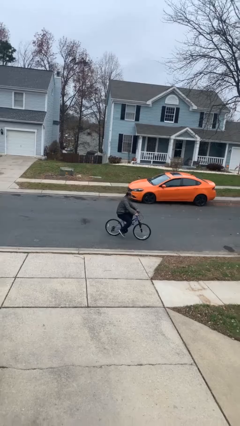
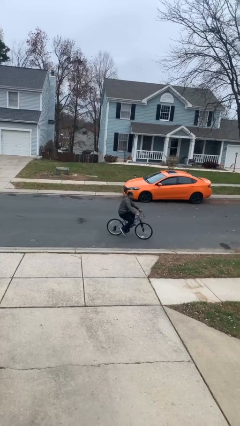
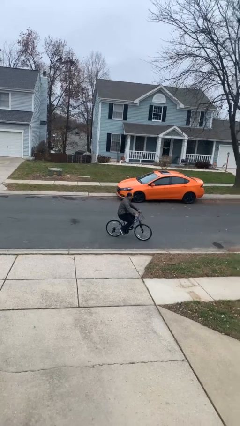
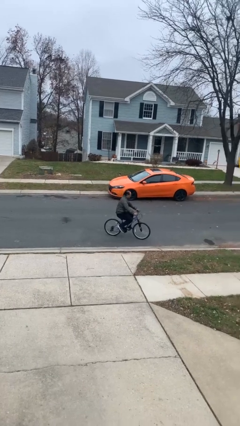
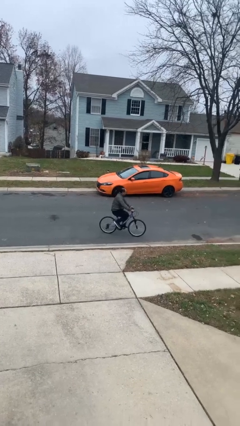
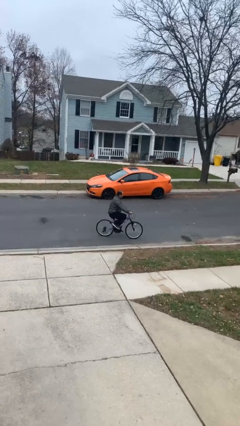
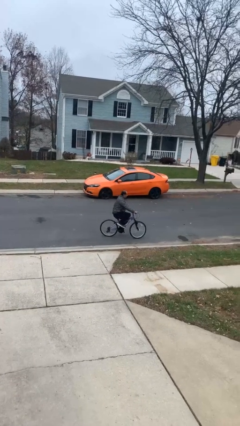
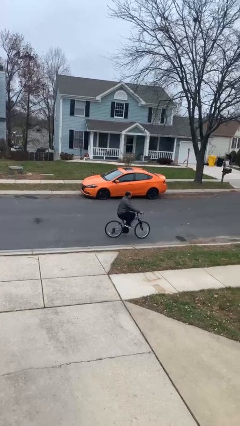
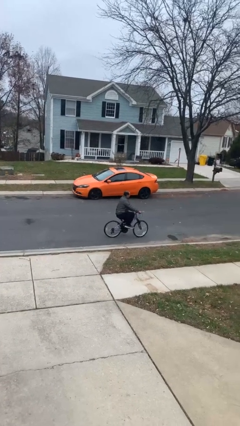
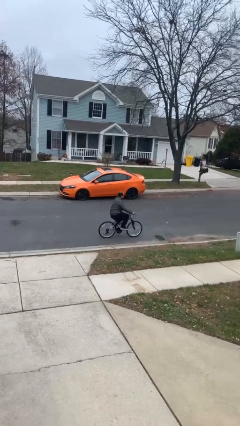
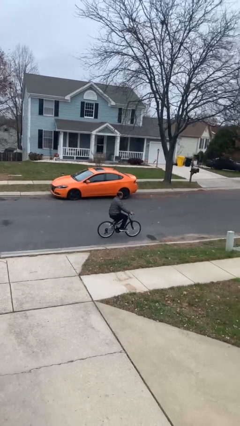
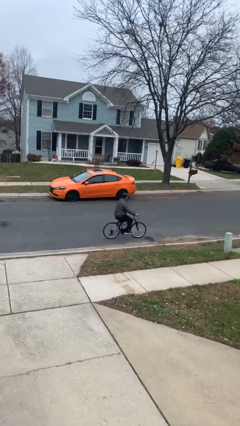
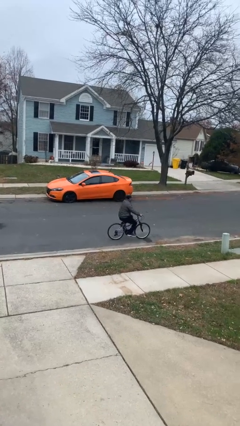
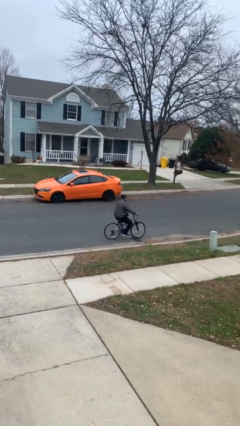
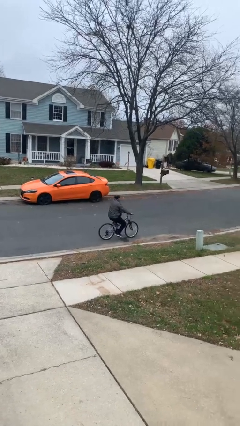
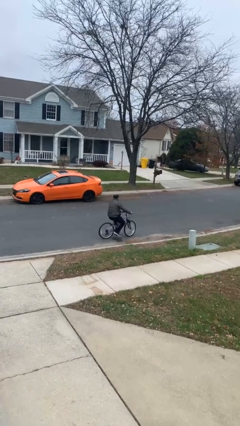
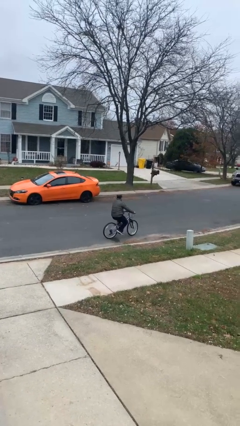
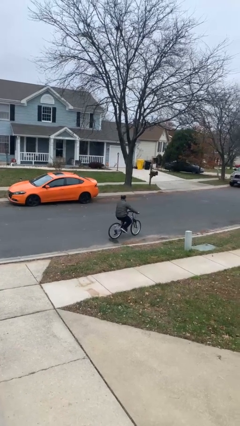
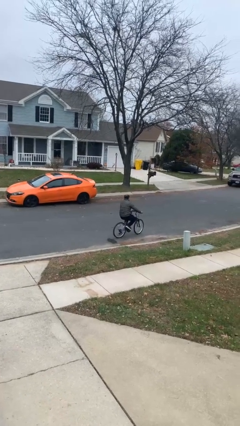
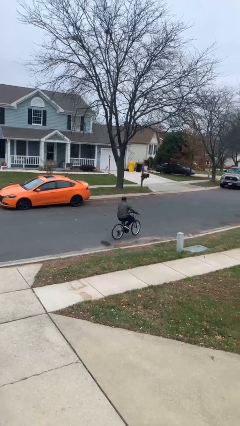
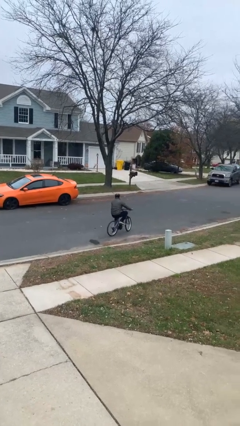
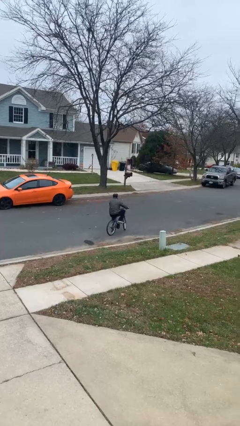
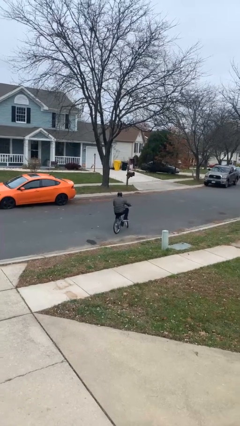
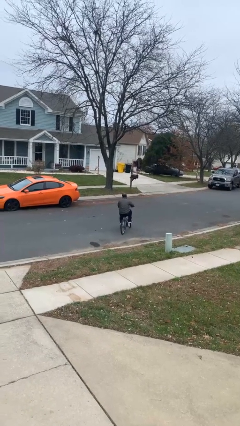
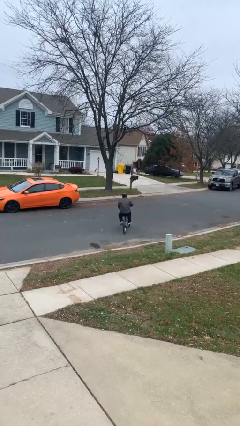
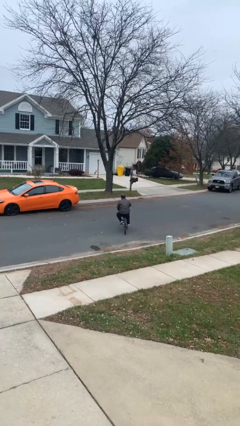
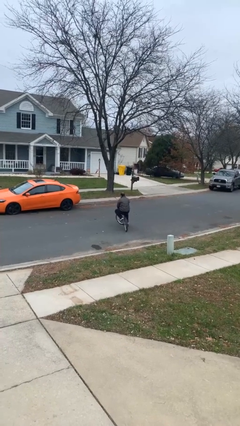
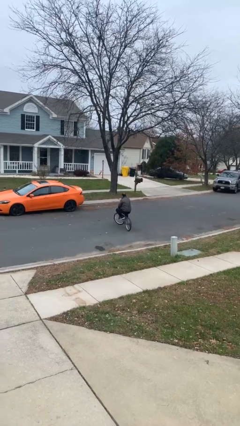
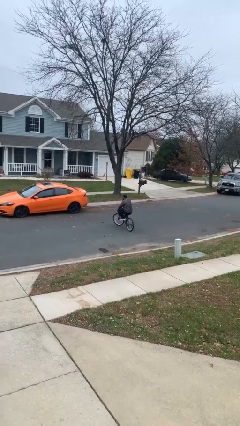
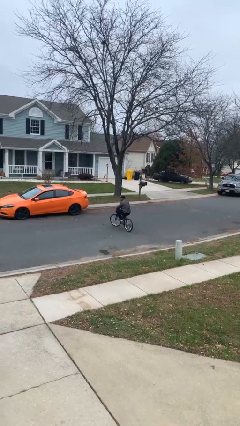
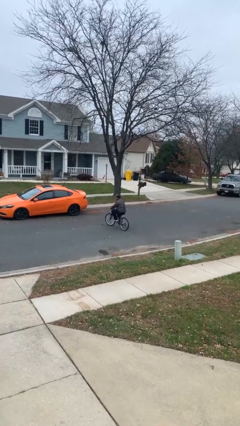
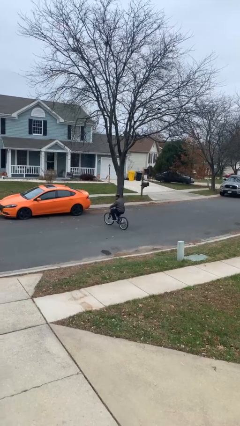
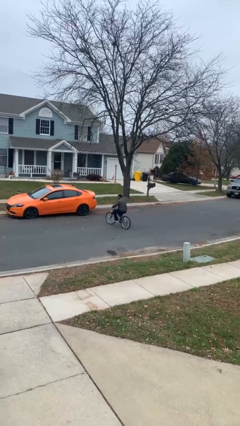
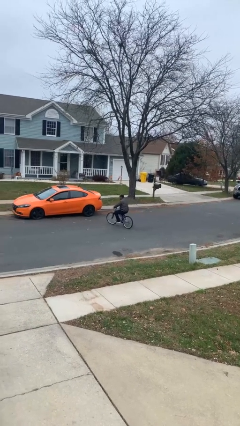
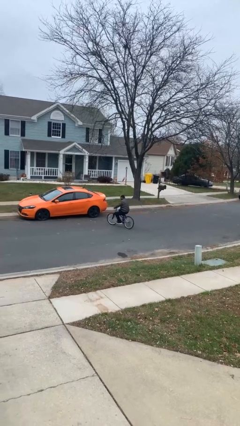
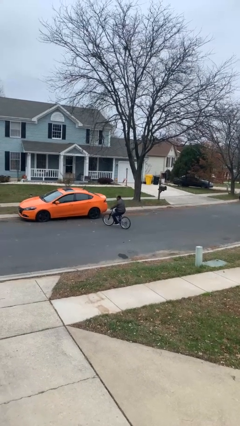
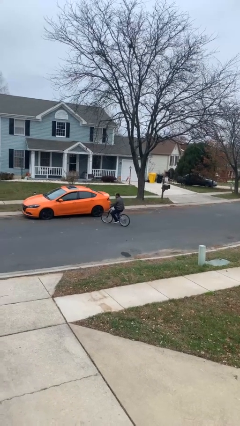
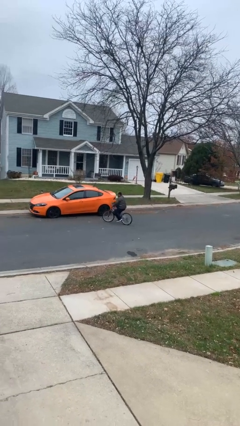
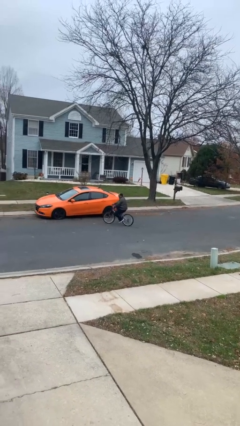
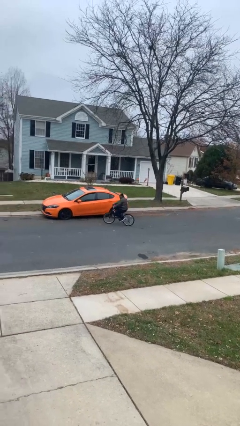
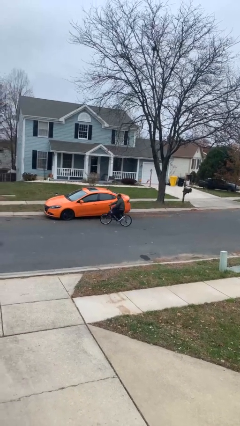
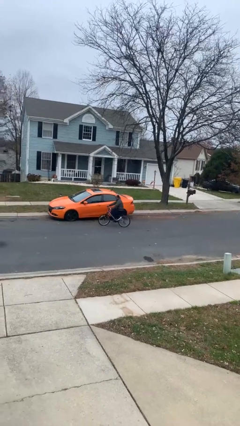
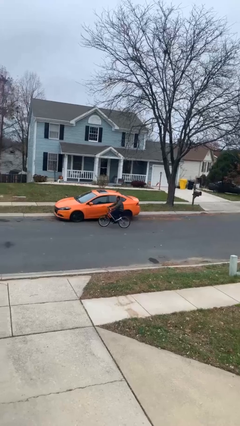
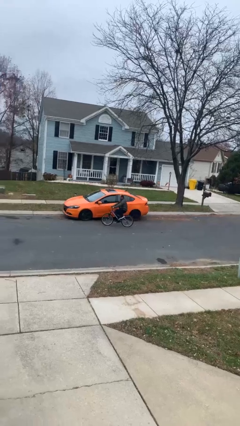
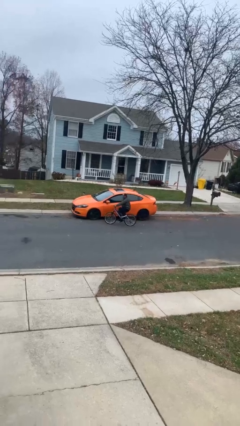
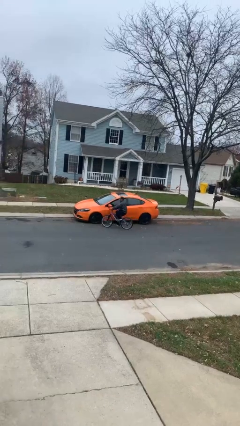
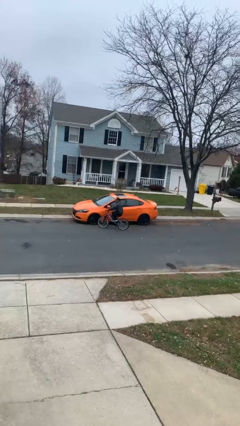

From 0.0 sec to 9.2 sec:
person rides bicycle

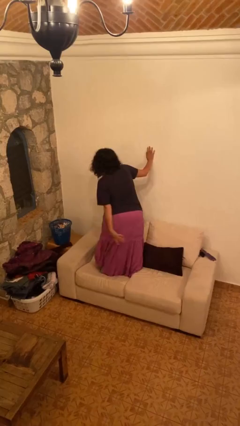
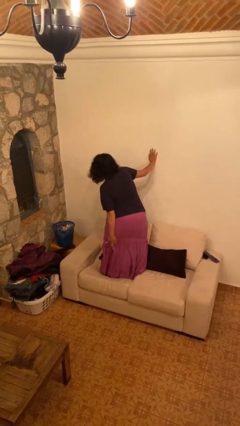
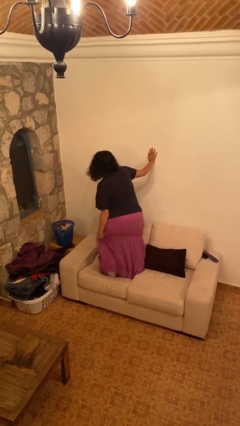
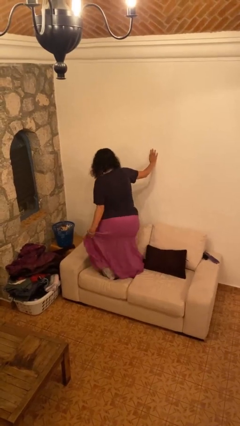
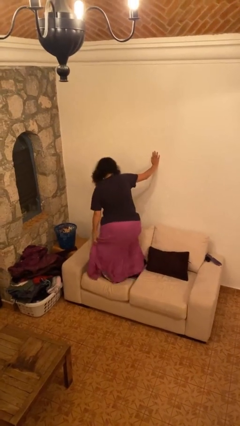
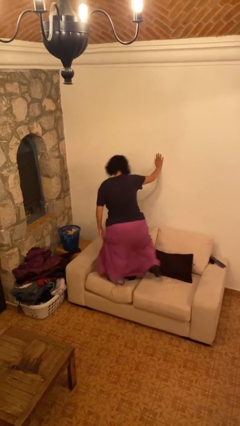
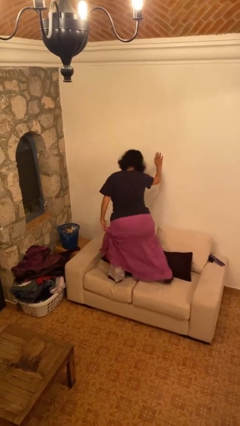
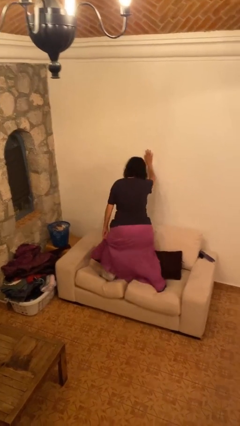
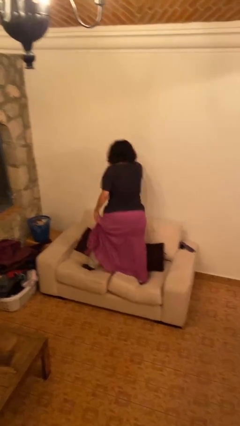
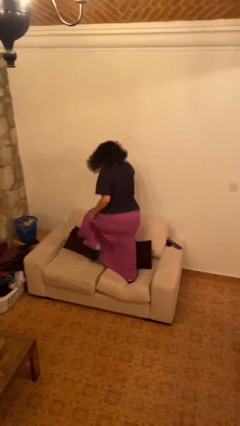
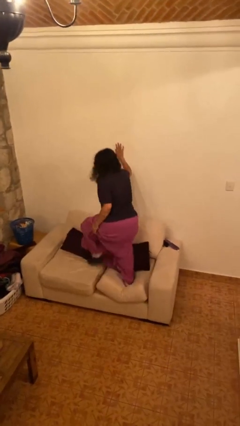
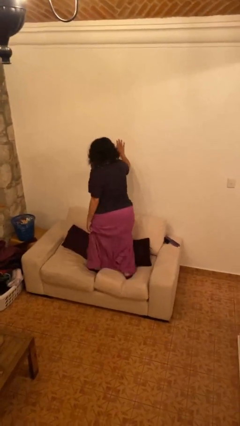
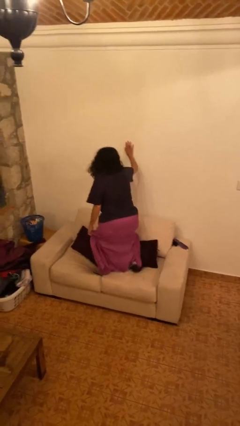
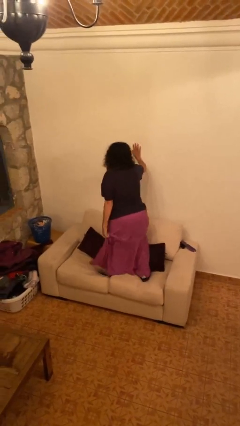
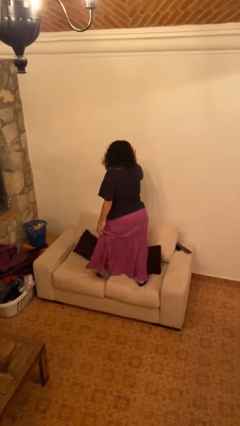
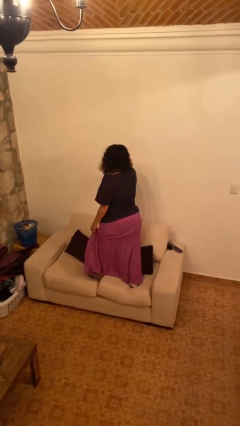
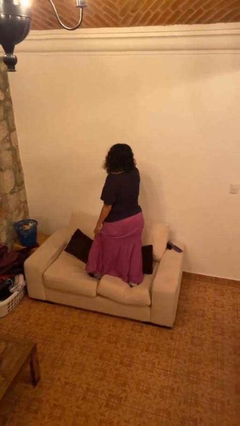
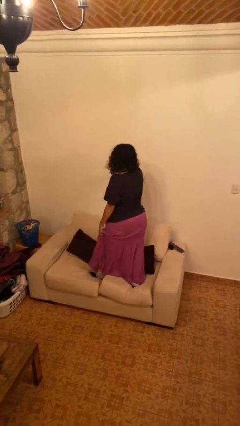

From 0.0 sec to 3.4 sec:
person jumps on couch

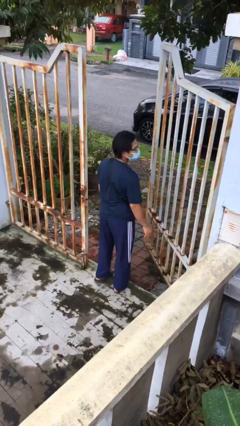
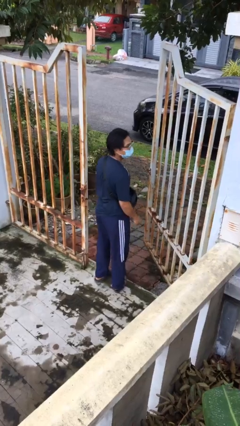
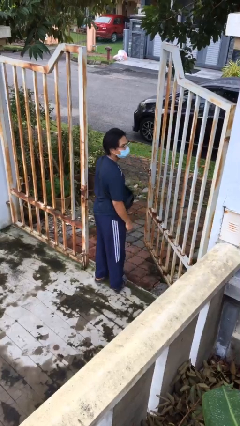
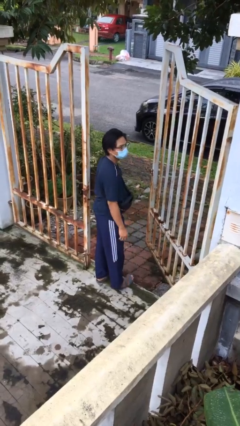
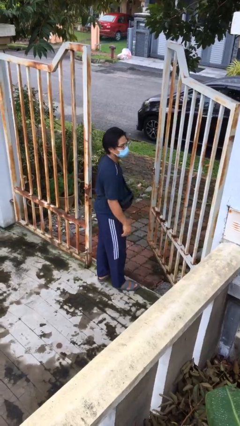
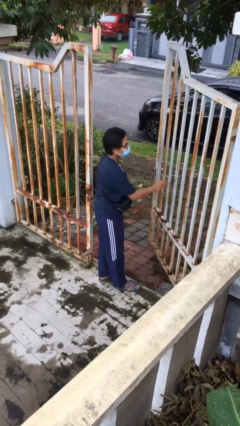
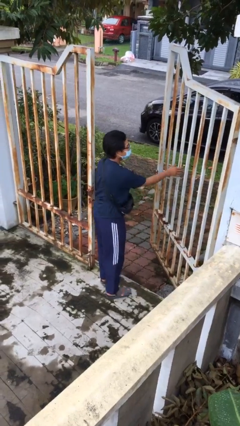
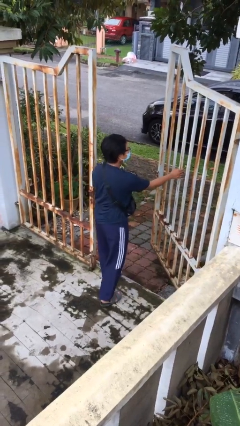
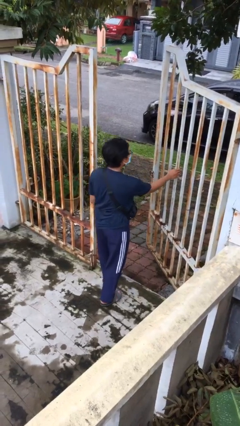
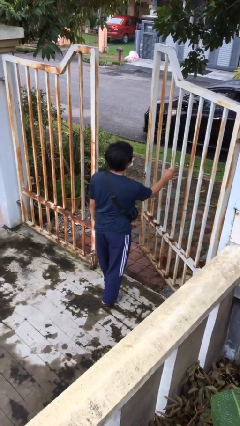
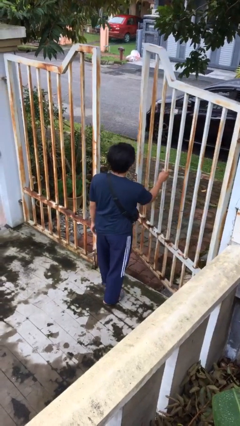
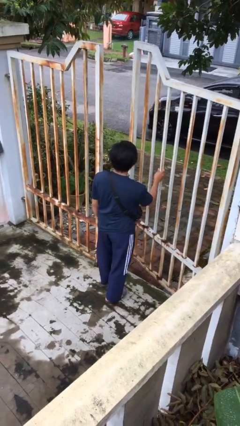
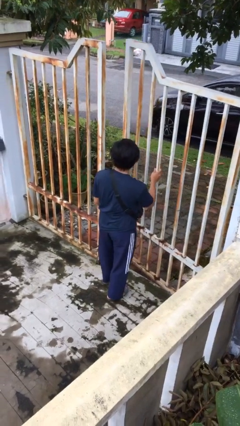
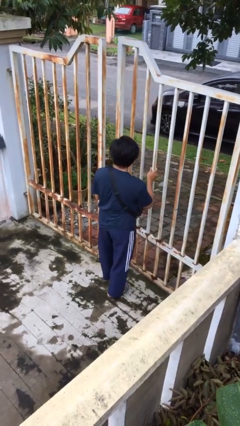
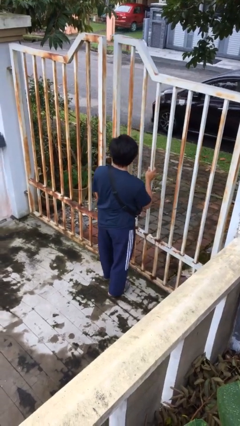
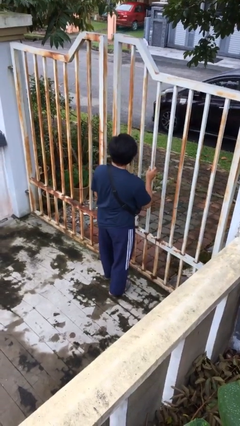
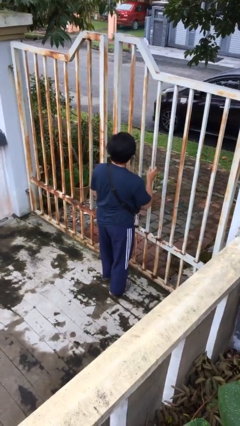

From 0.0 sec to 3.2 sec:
person closes facility door

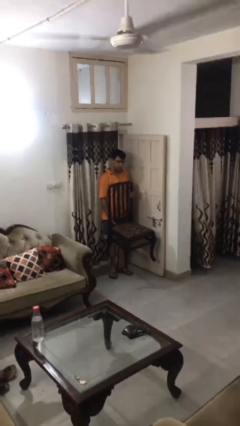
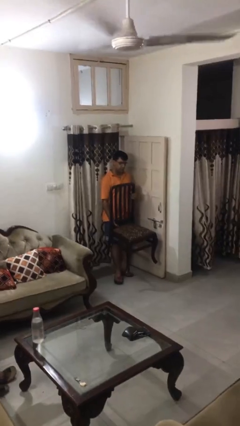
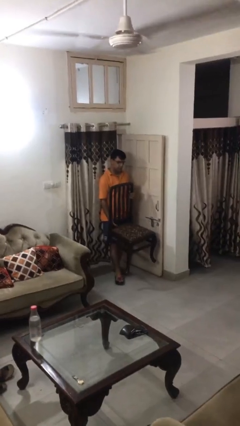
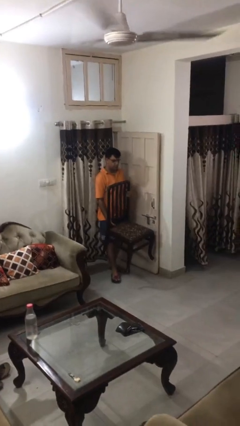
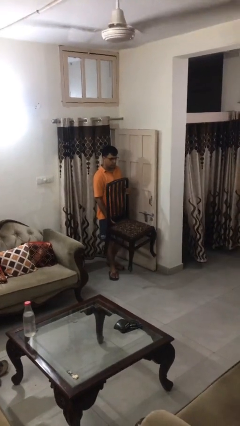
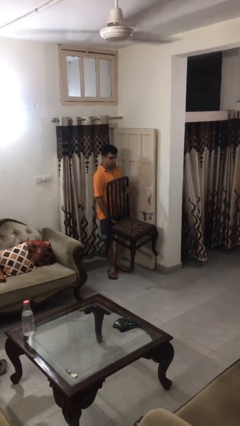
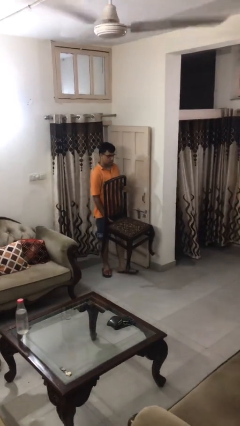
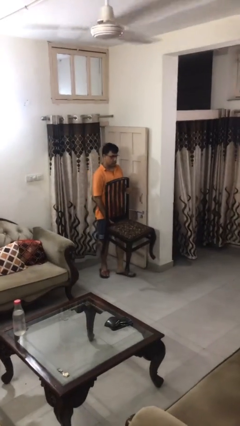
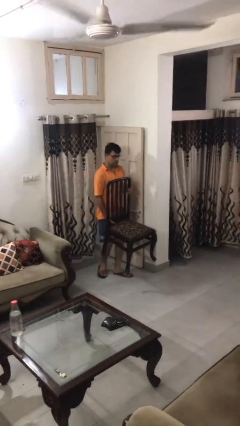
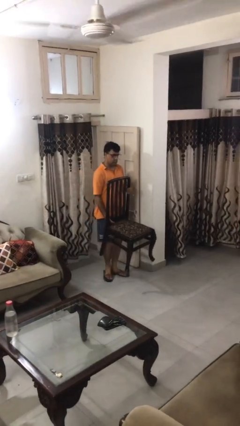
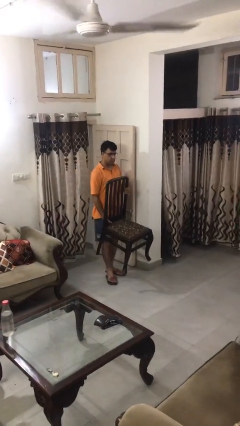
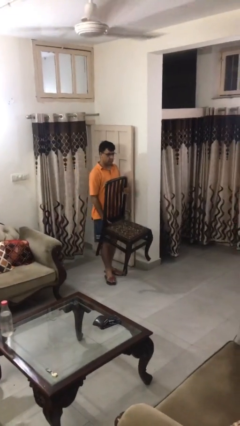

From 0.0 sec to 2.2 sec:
person carries furniture
